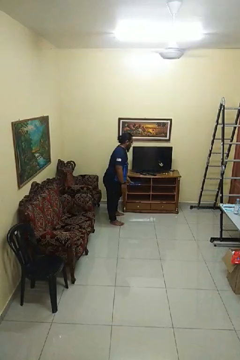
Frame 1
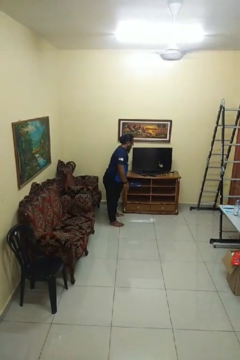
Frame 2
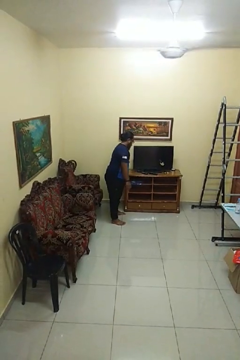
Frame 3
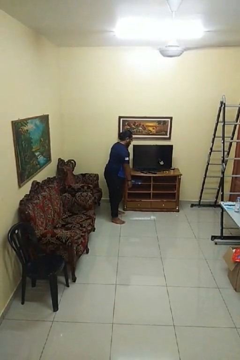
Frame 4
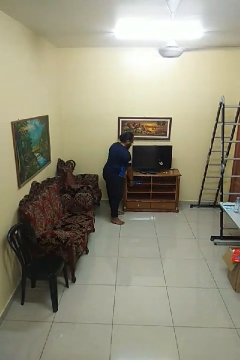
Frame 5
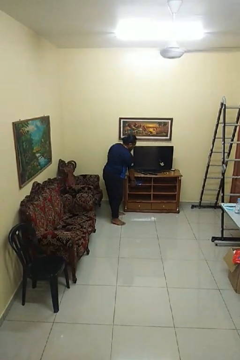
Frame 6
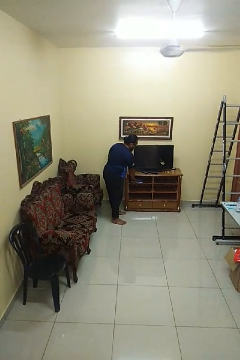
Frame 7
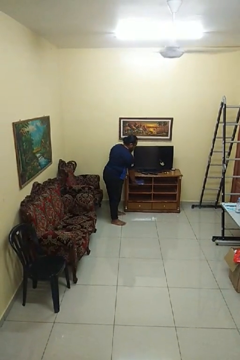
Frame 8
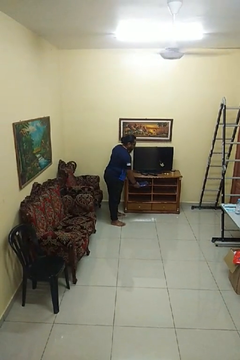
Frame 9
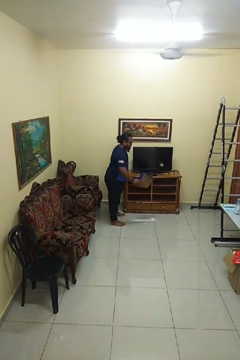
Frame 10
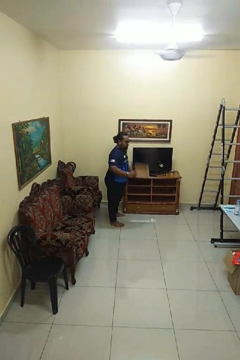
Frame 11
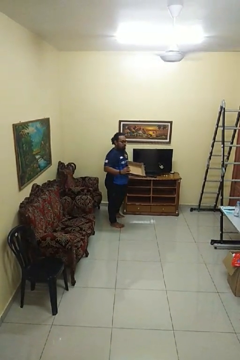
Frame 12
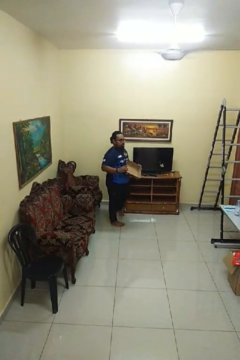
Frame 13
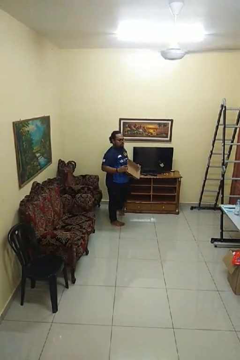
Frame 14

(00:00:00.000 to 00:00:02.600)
person picks up object from cabinet

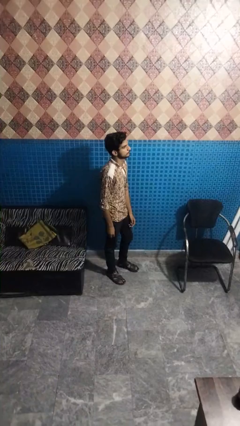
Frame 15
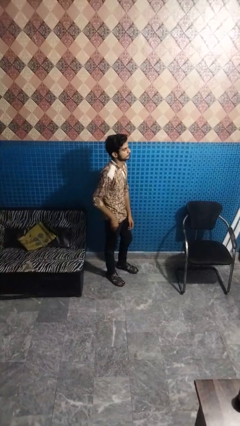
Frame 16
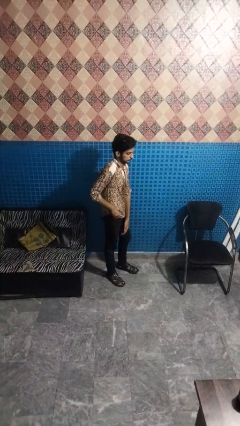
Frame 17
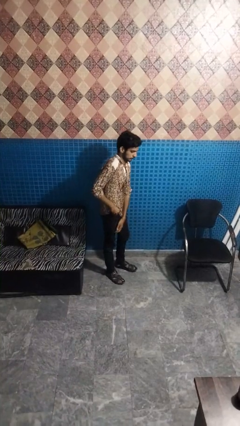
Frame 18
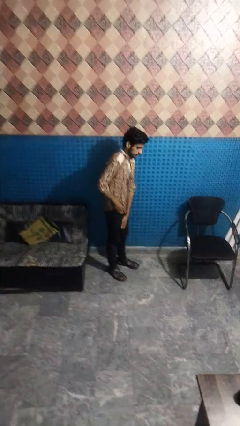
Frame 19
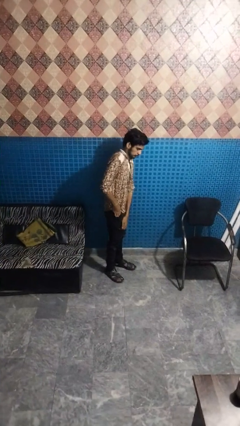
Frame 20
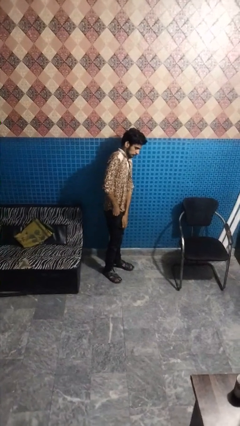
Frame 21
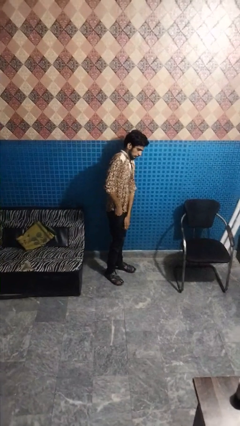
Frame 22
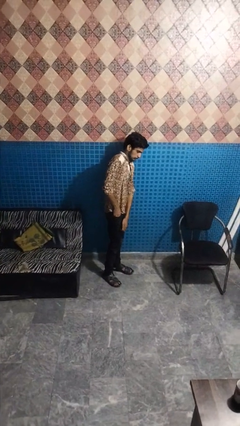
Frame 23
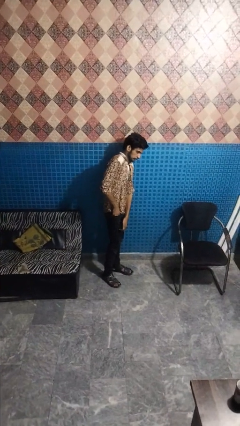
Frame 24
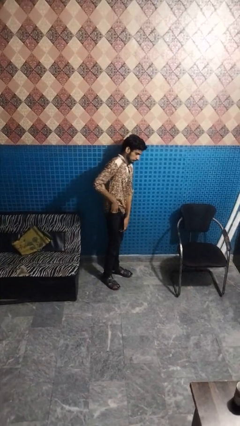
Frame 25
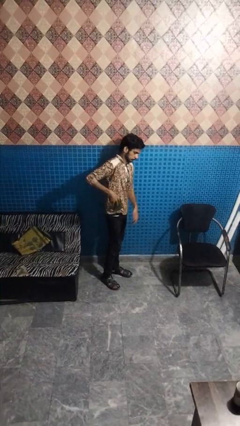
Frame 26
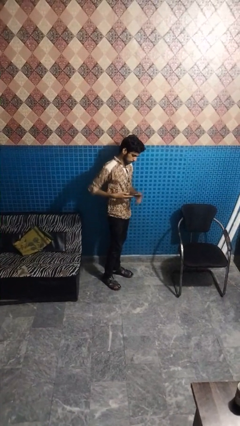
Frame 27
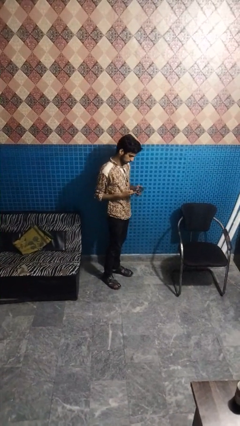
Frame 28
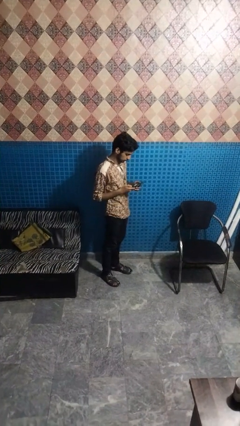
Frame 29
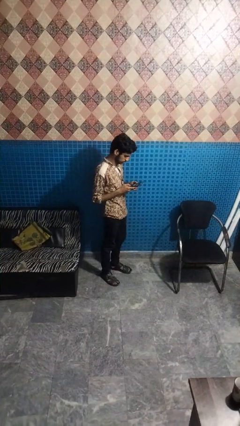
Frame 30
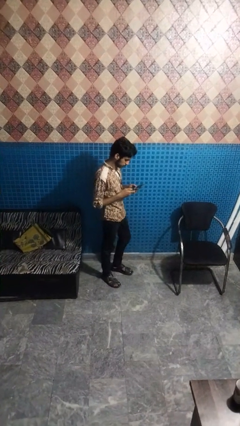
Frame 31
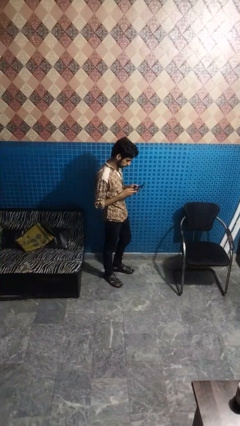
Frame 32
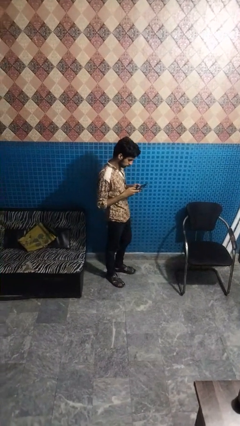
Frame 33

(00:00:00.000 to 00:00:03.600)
person takes phone from pocket

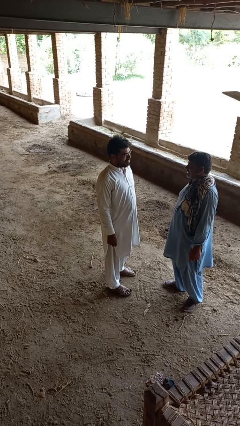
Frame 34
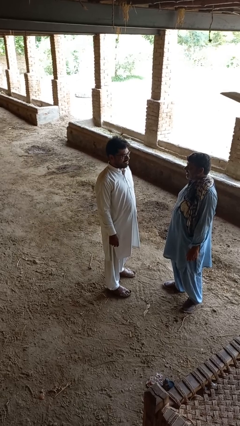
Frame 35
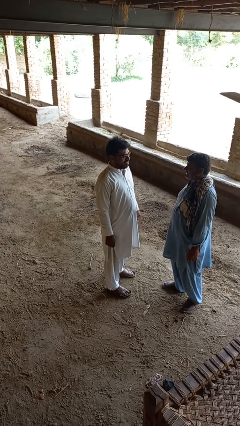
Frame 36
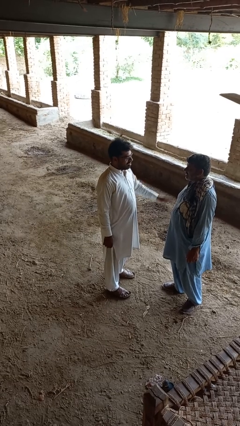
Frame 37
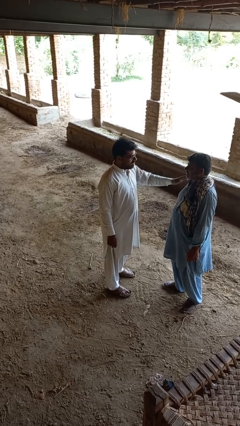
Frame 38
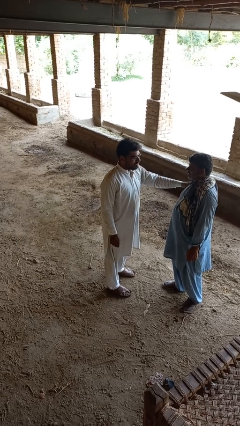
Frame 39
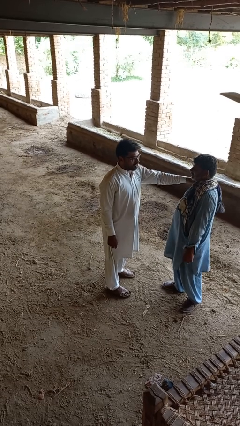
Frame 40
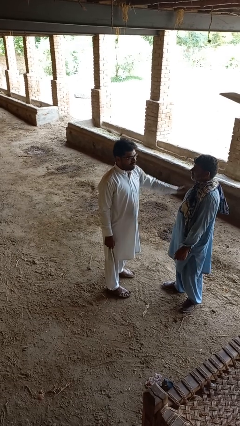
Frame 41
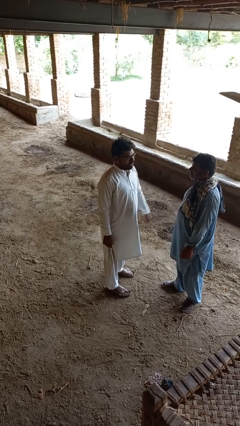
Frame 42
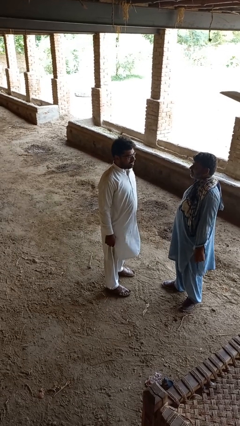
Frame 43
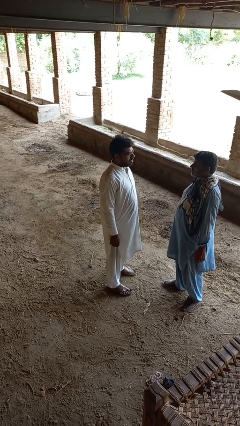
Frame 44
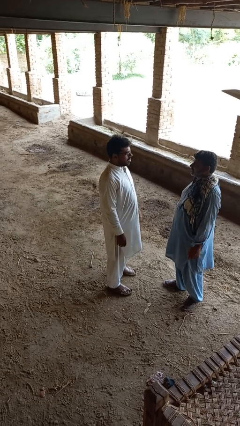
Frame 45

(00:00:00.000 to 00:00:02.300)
person shoves person

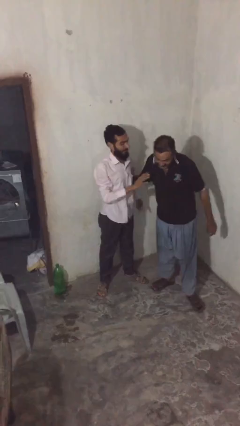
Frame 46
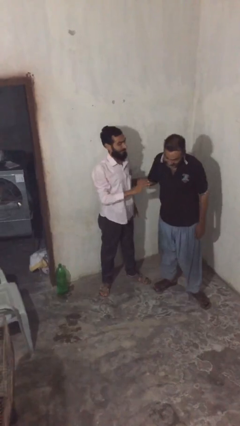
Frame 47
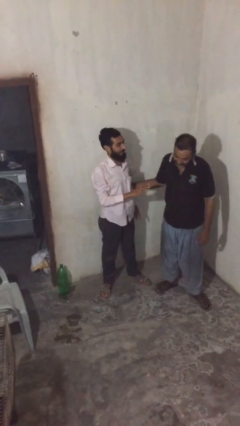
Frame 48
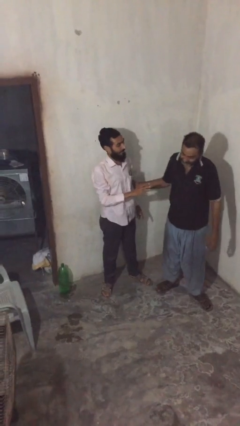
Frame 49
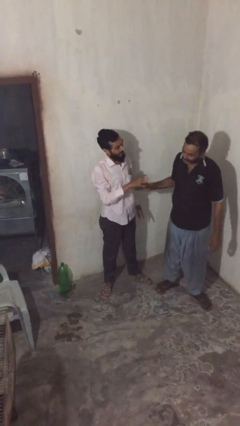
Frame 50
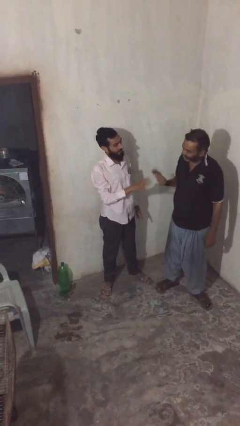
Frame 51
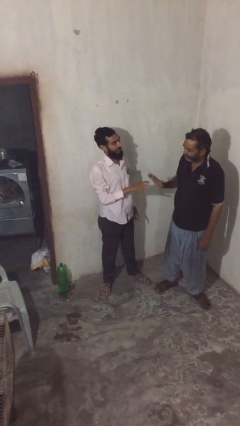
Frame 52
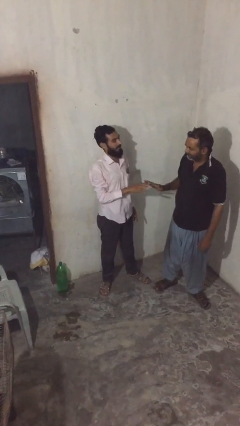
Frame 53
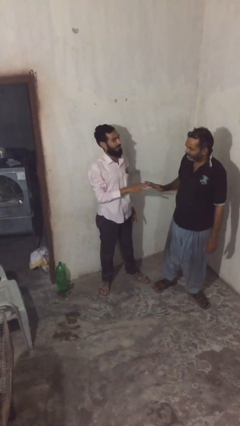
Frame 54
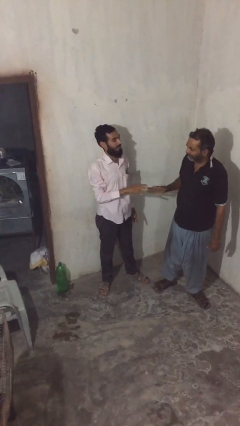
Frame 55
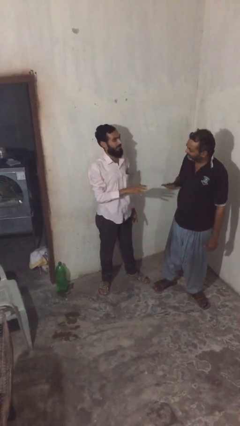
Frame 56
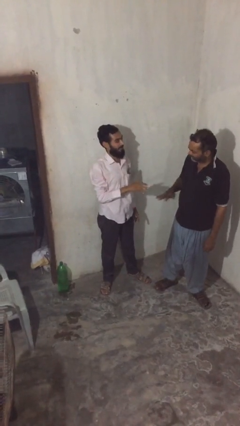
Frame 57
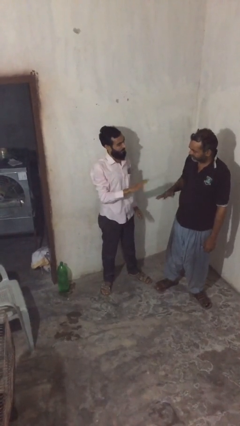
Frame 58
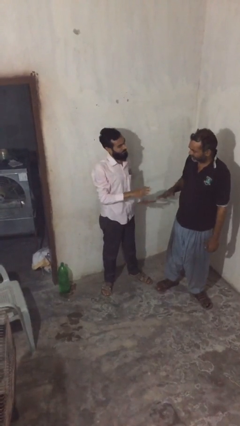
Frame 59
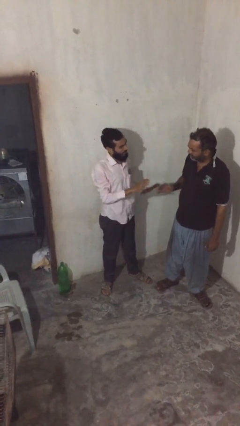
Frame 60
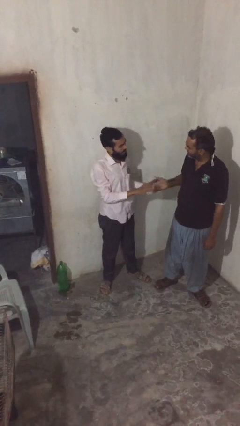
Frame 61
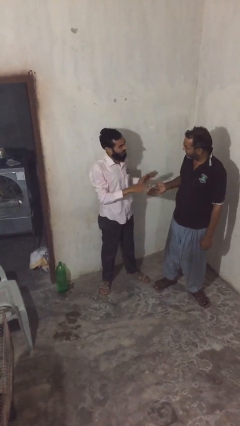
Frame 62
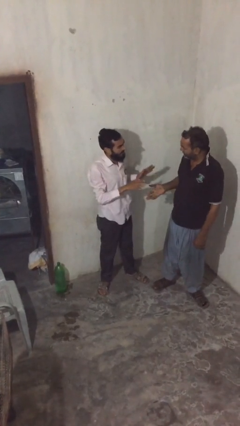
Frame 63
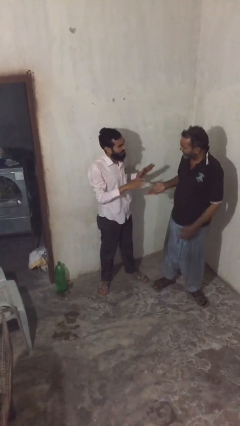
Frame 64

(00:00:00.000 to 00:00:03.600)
person talks to person

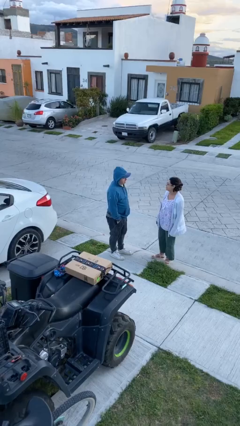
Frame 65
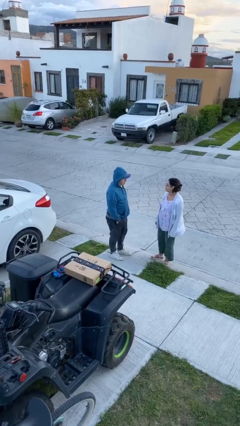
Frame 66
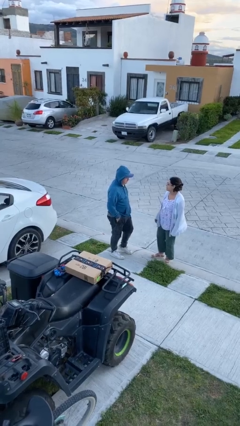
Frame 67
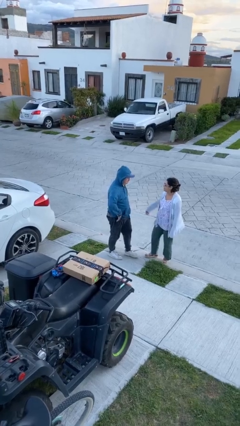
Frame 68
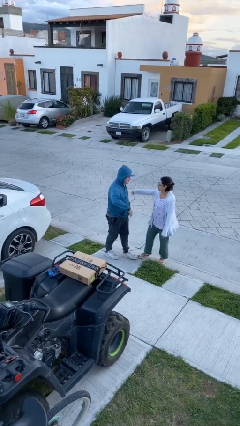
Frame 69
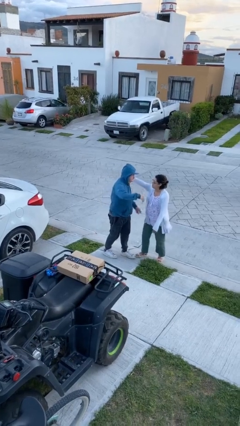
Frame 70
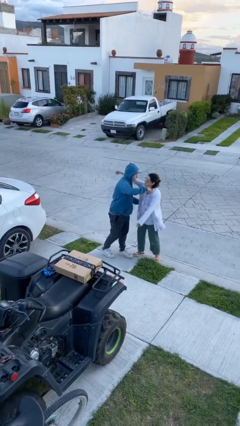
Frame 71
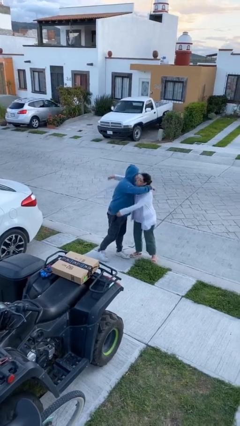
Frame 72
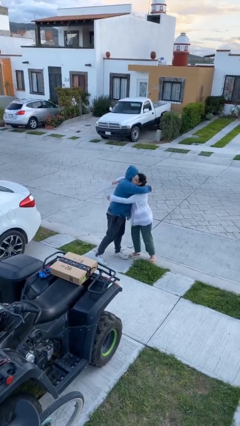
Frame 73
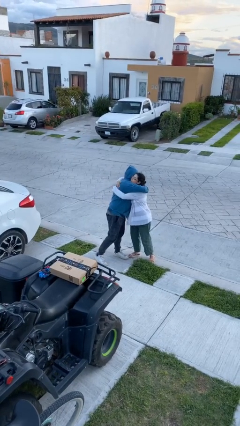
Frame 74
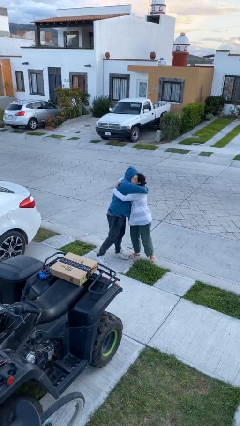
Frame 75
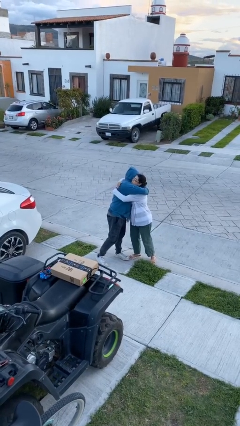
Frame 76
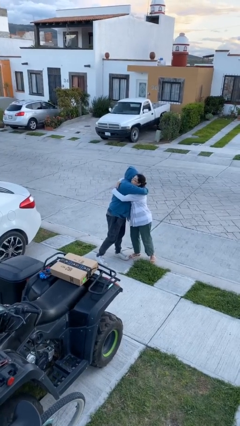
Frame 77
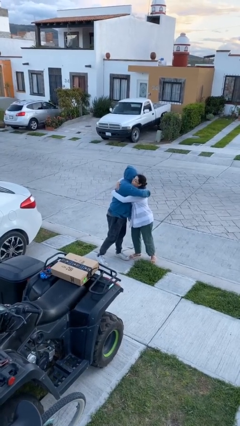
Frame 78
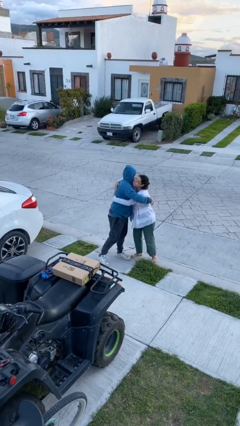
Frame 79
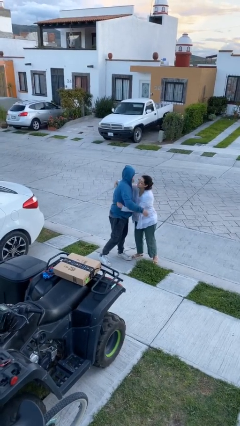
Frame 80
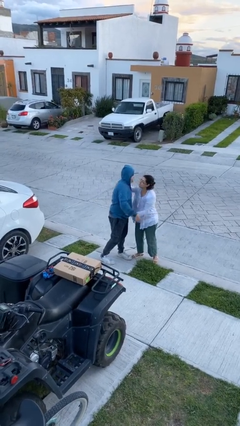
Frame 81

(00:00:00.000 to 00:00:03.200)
person embraces person

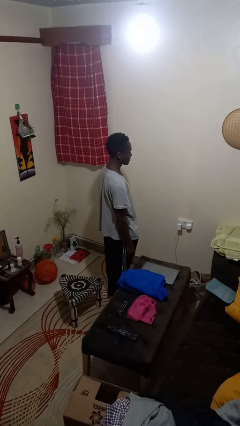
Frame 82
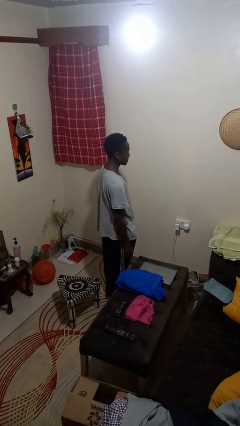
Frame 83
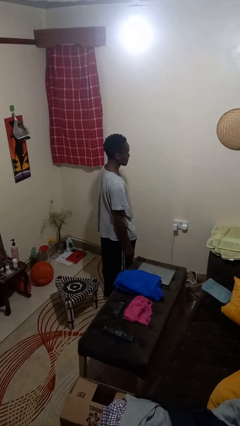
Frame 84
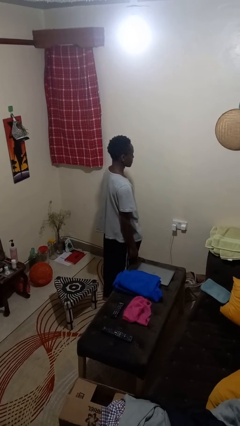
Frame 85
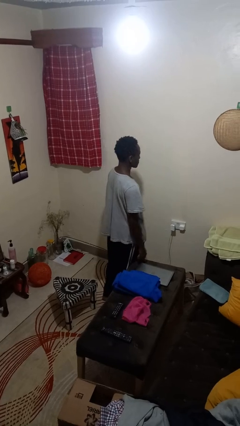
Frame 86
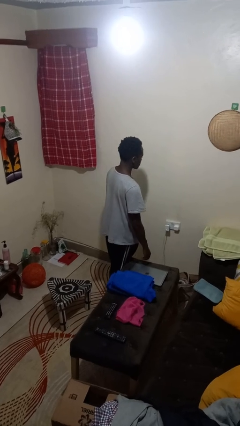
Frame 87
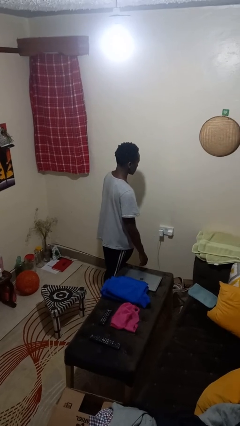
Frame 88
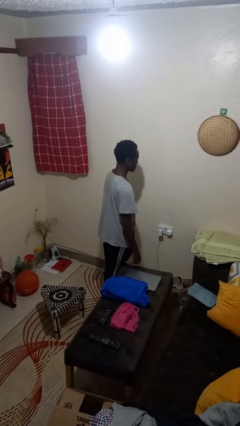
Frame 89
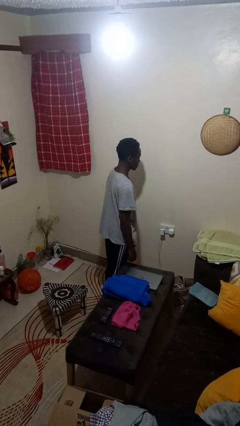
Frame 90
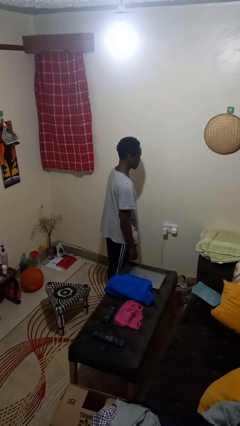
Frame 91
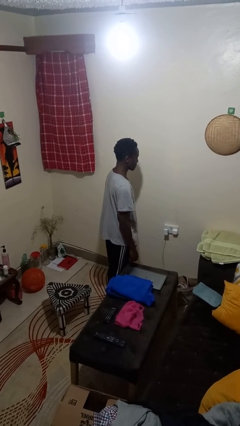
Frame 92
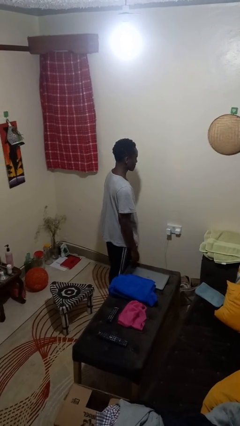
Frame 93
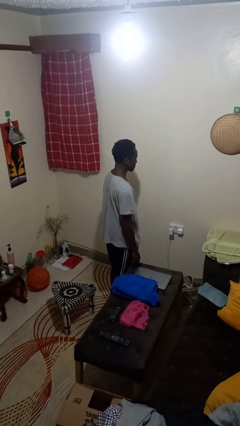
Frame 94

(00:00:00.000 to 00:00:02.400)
person bumps into table
